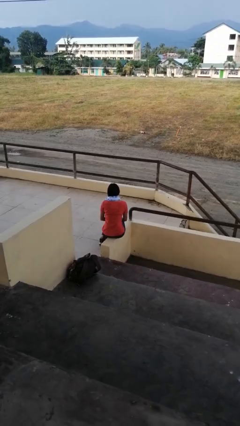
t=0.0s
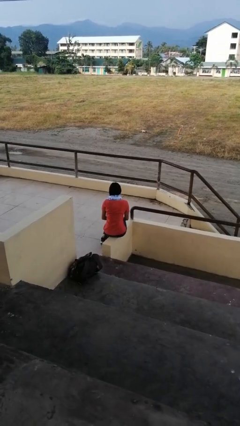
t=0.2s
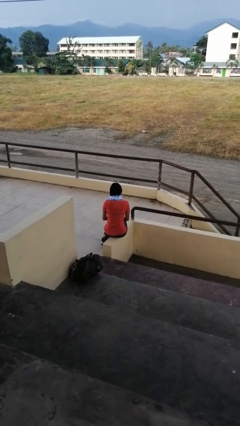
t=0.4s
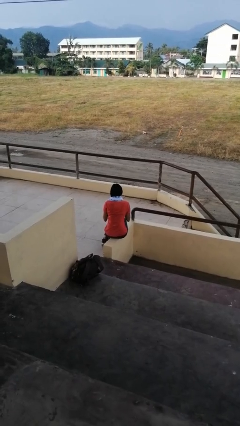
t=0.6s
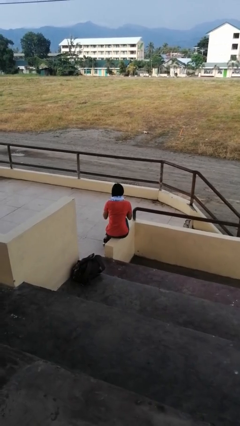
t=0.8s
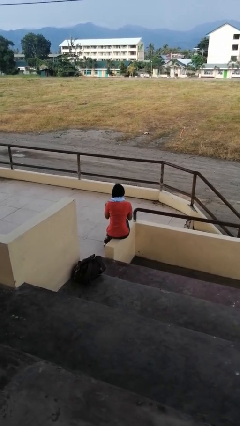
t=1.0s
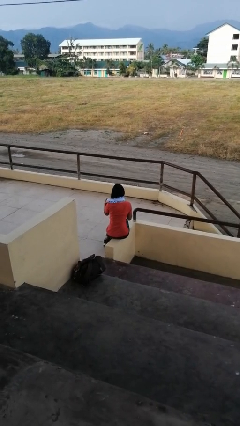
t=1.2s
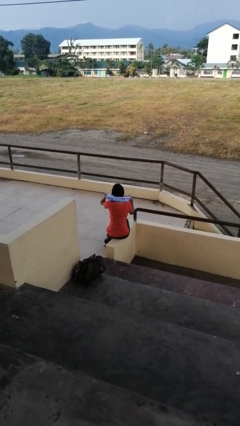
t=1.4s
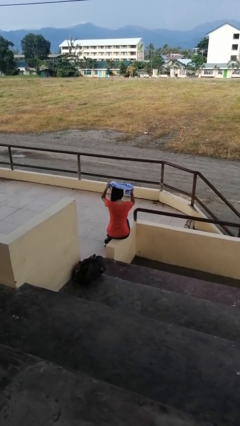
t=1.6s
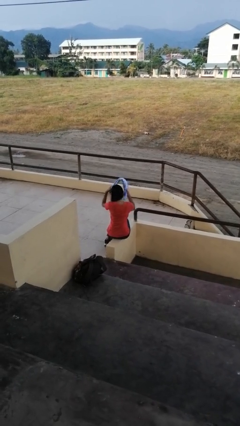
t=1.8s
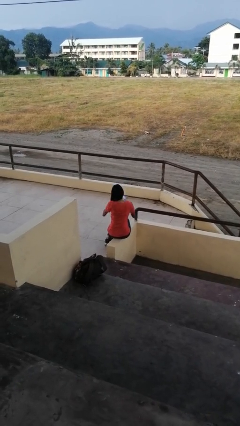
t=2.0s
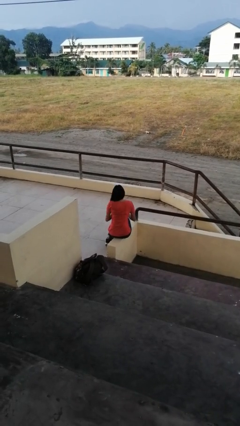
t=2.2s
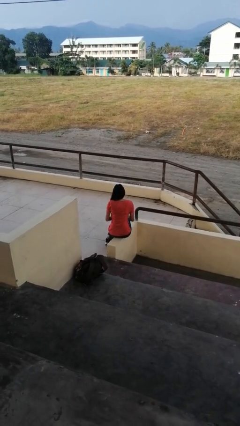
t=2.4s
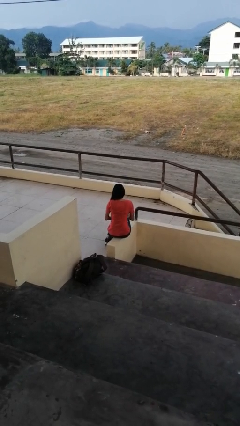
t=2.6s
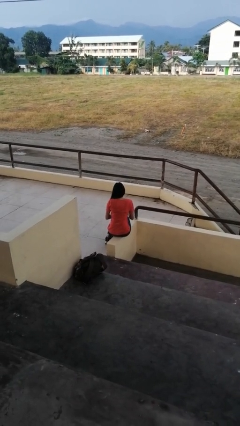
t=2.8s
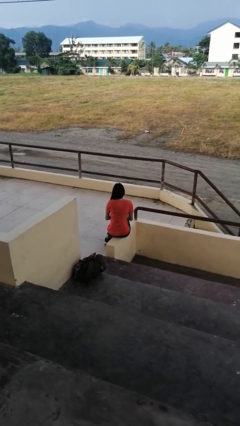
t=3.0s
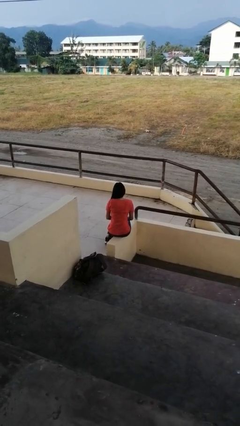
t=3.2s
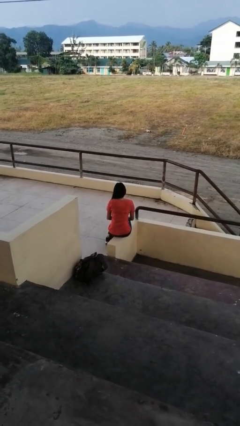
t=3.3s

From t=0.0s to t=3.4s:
person takes off scarf

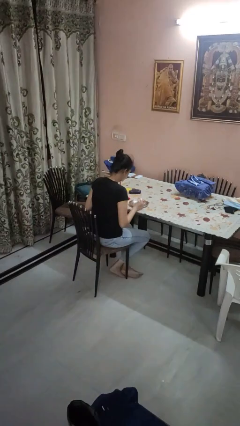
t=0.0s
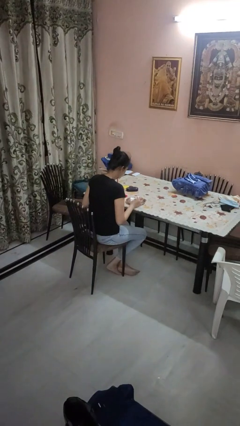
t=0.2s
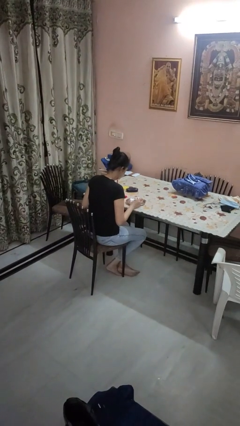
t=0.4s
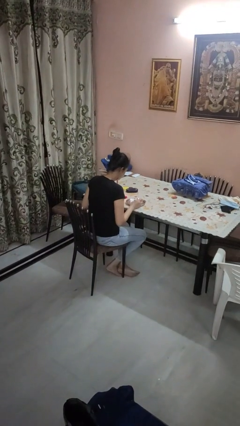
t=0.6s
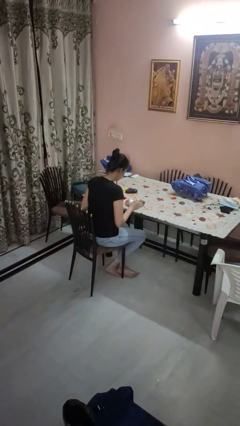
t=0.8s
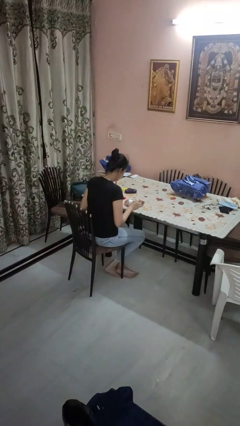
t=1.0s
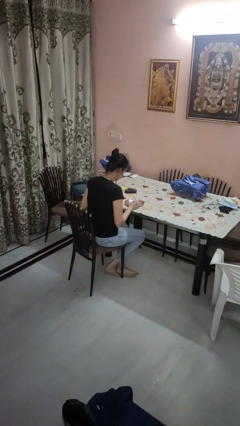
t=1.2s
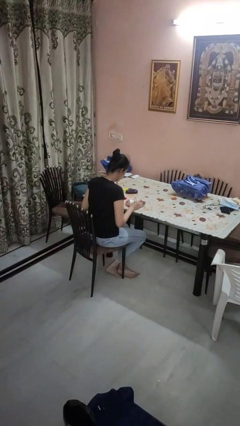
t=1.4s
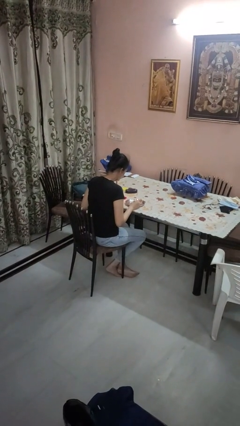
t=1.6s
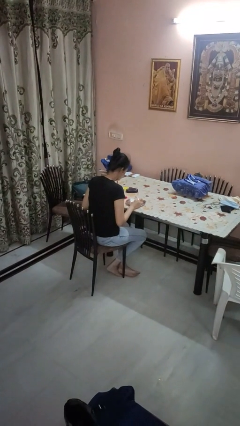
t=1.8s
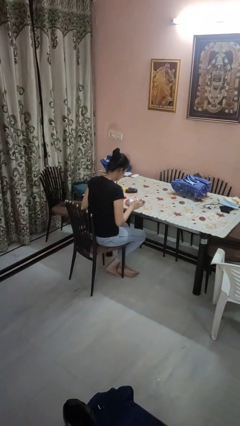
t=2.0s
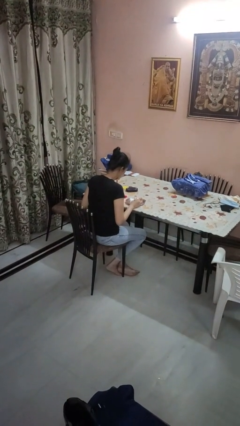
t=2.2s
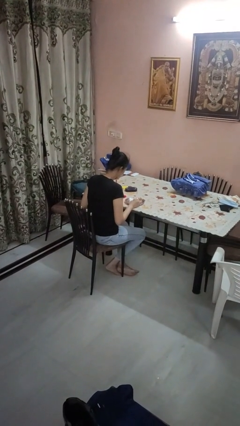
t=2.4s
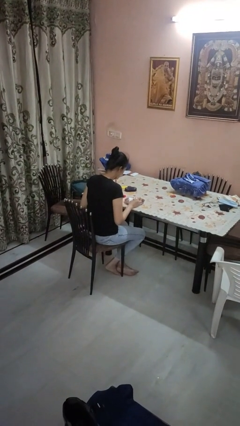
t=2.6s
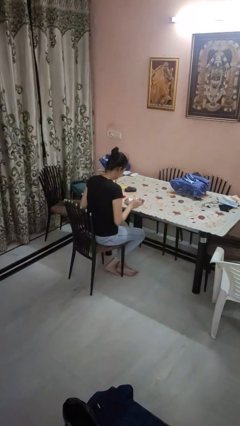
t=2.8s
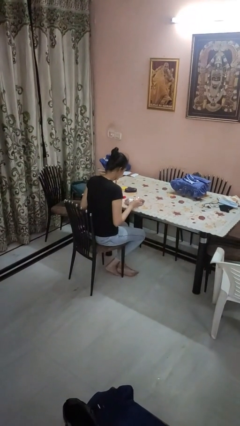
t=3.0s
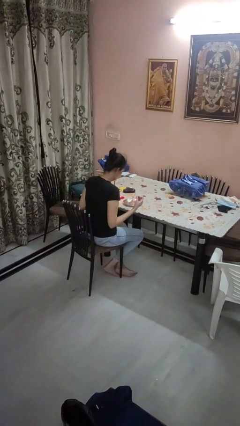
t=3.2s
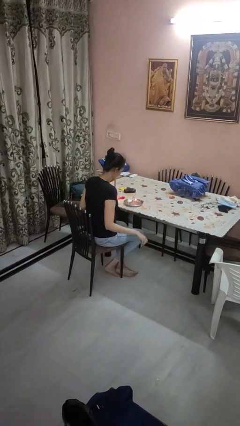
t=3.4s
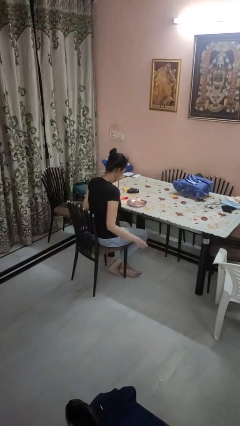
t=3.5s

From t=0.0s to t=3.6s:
person lights candle

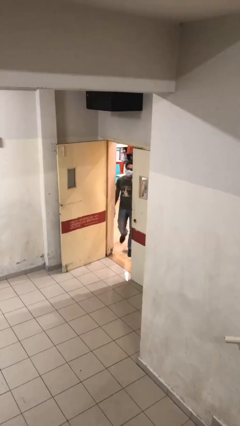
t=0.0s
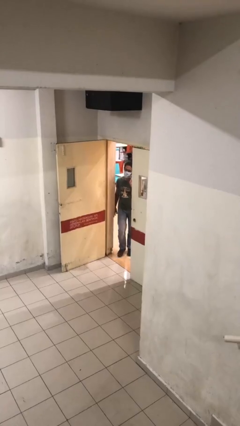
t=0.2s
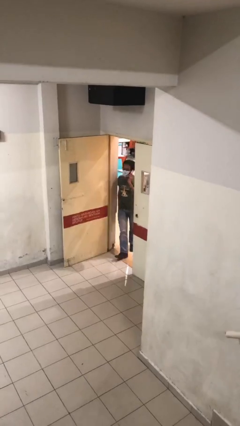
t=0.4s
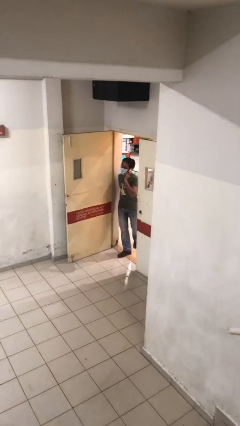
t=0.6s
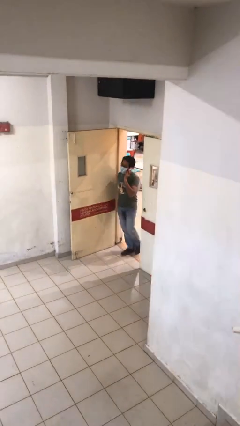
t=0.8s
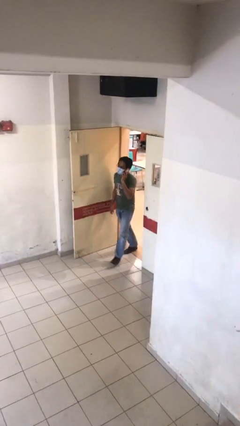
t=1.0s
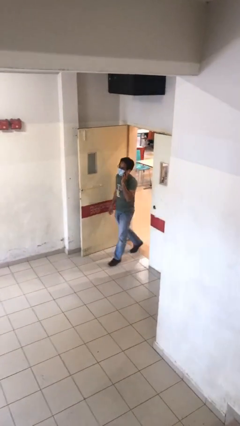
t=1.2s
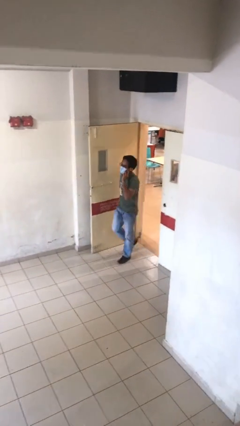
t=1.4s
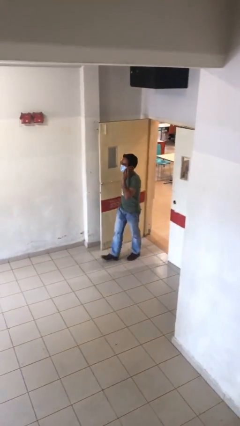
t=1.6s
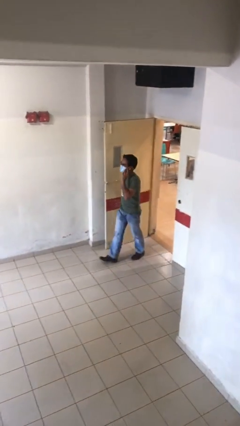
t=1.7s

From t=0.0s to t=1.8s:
person enters scene through structure

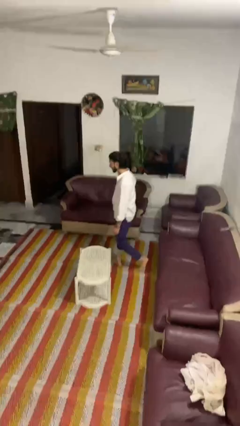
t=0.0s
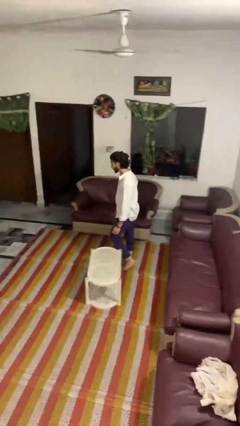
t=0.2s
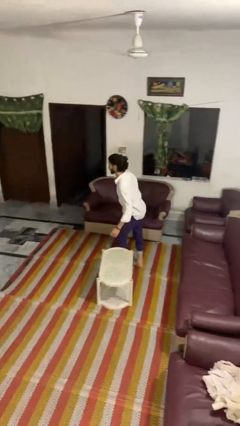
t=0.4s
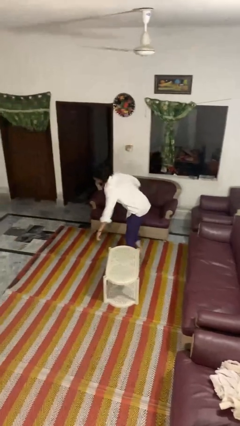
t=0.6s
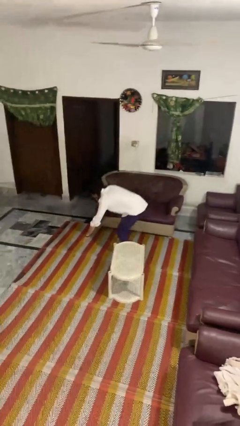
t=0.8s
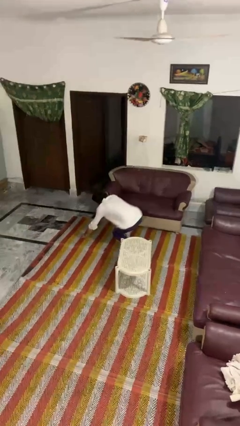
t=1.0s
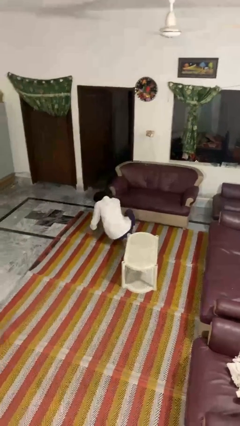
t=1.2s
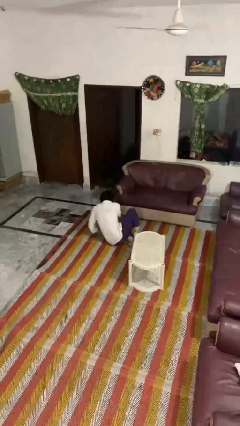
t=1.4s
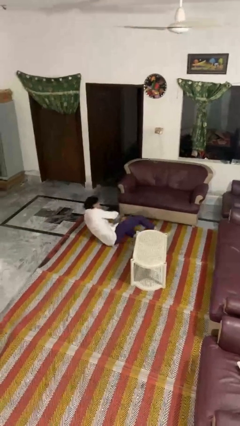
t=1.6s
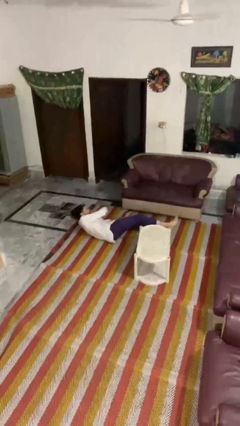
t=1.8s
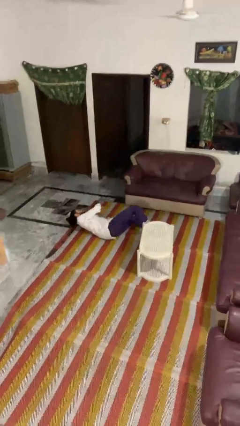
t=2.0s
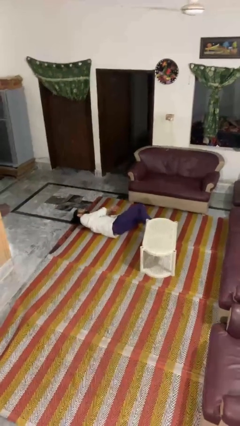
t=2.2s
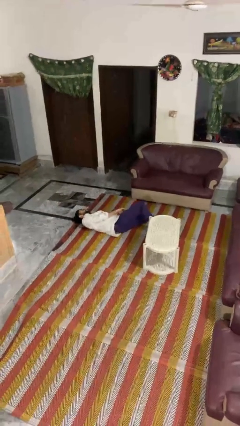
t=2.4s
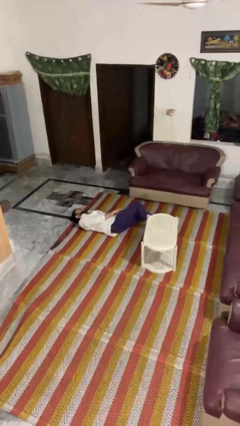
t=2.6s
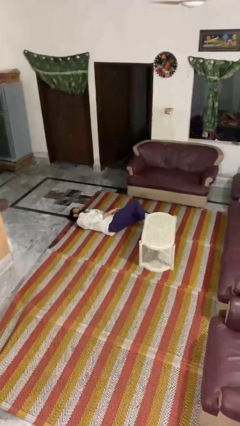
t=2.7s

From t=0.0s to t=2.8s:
person trips on object on floor

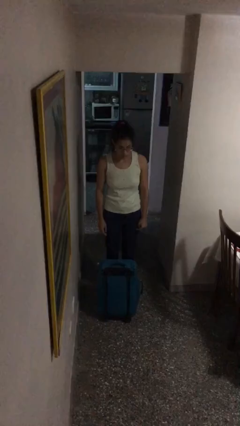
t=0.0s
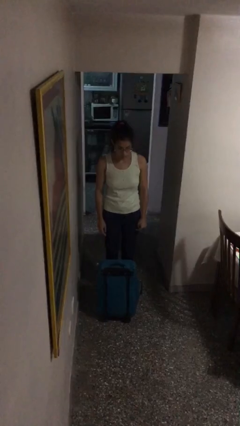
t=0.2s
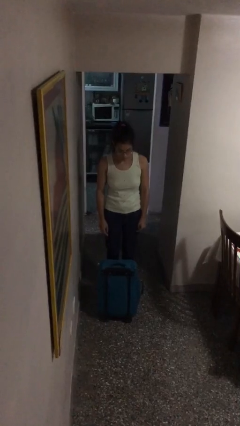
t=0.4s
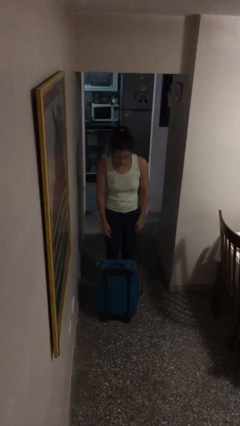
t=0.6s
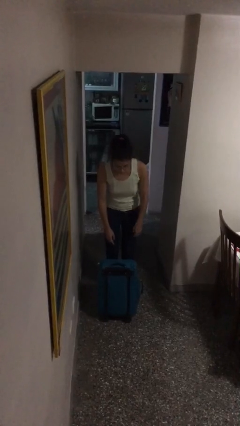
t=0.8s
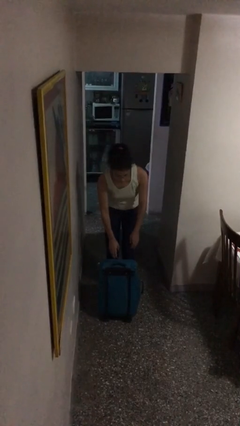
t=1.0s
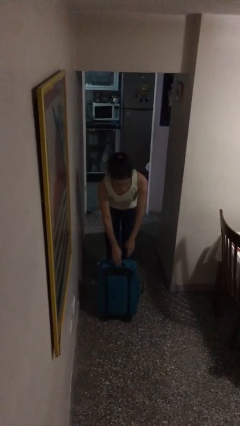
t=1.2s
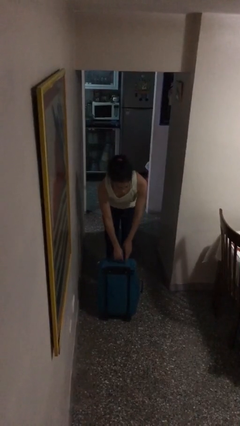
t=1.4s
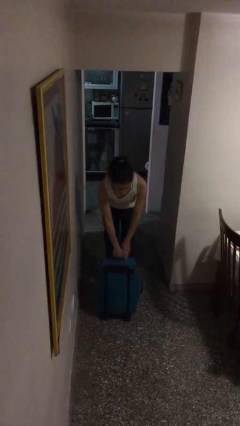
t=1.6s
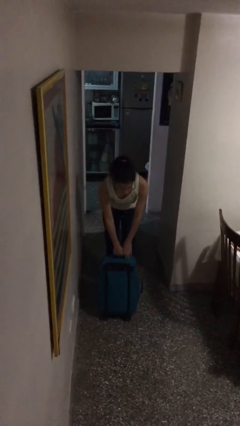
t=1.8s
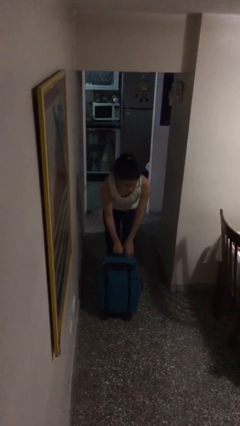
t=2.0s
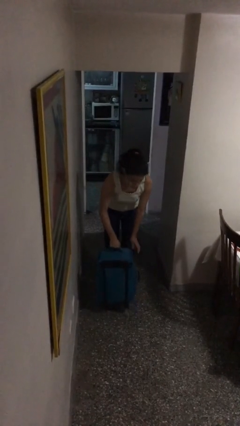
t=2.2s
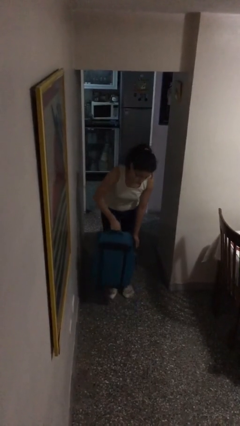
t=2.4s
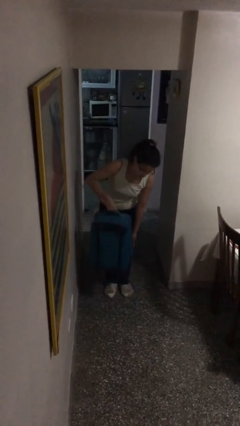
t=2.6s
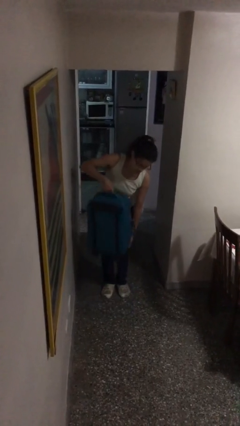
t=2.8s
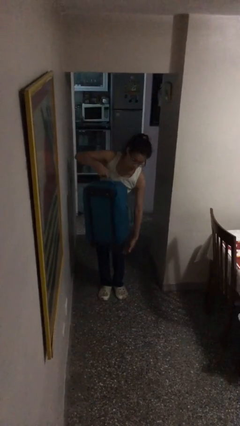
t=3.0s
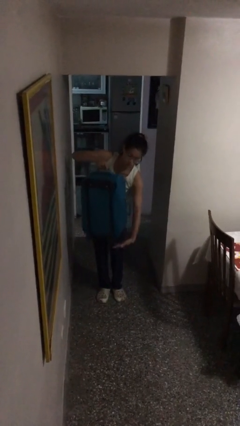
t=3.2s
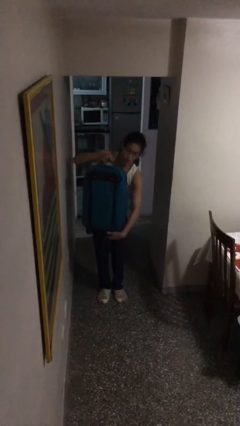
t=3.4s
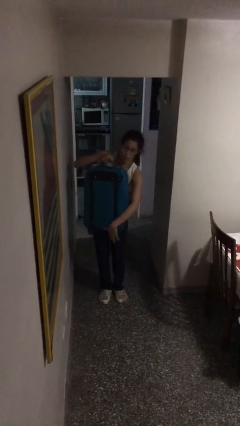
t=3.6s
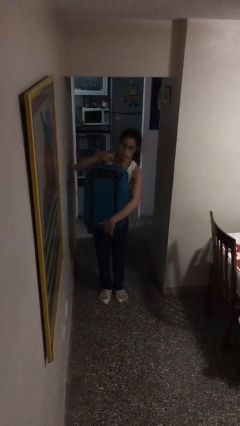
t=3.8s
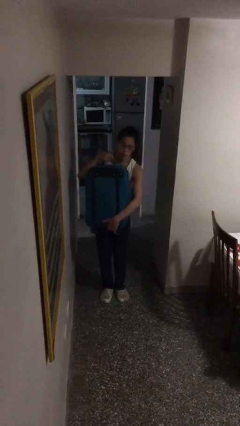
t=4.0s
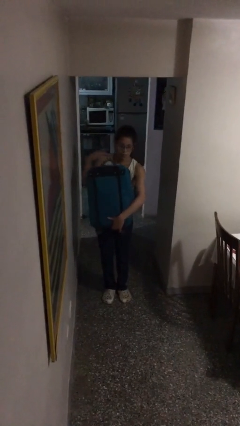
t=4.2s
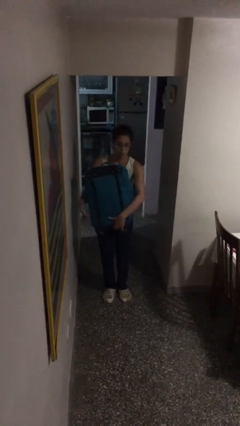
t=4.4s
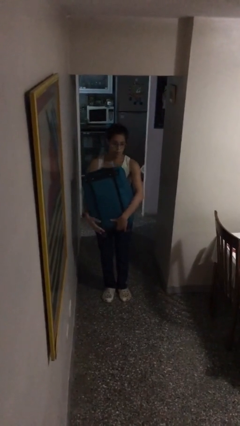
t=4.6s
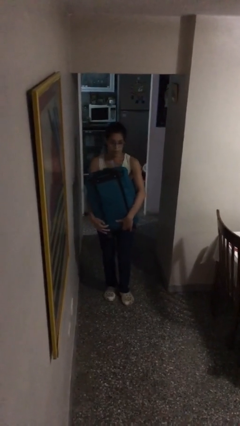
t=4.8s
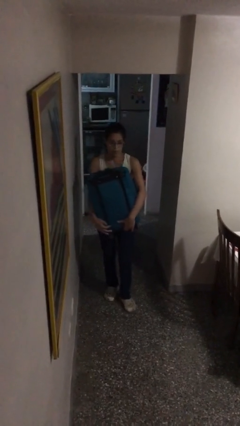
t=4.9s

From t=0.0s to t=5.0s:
person picks up object from floor

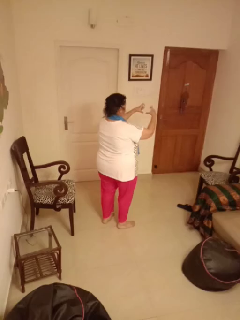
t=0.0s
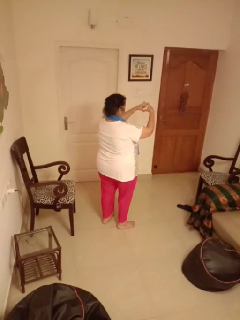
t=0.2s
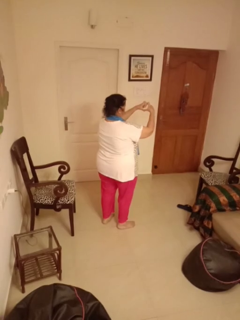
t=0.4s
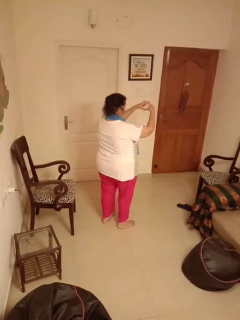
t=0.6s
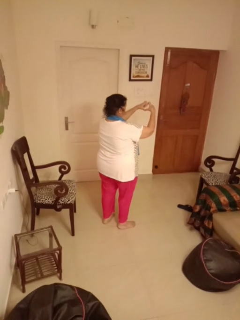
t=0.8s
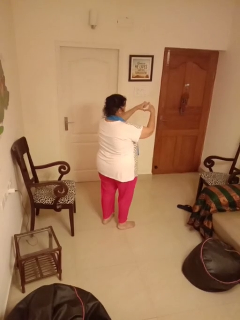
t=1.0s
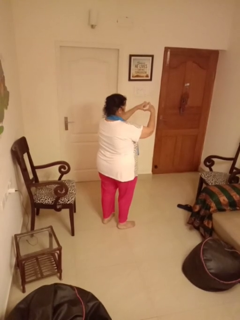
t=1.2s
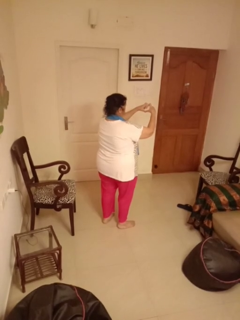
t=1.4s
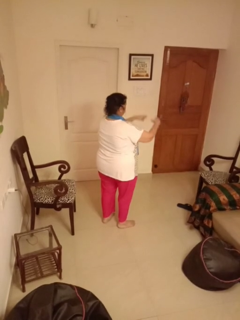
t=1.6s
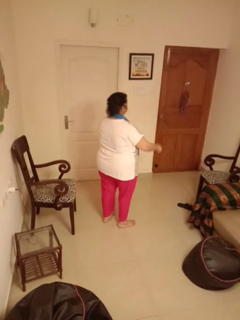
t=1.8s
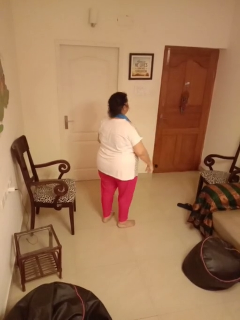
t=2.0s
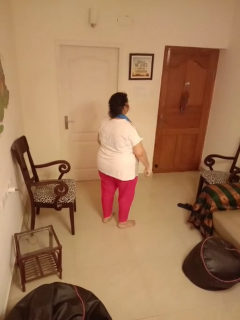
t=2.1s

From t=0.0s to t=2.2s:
person gestures heart
